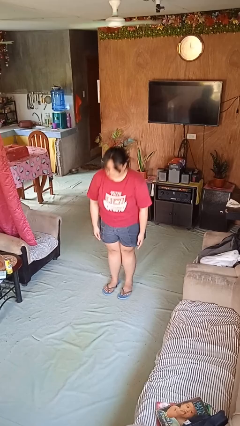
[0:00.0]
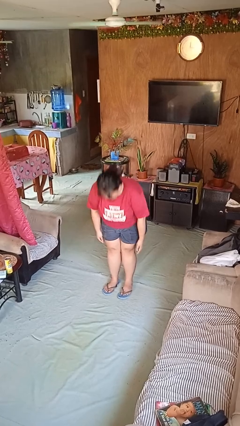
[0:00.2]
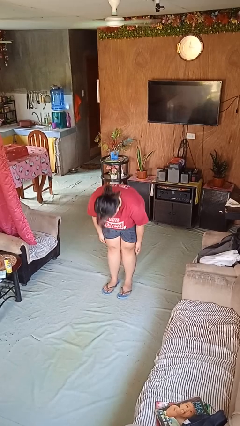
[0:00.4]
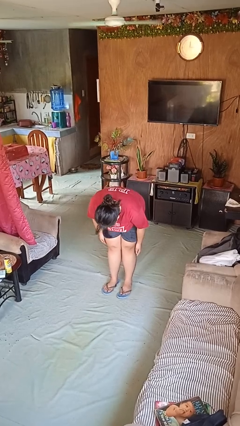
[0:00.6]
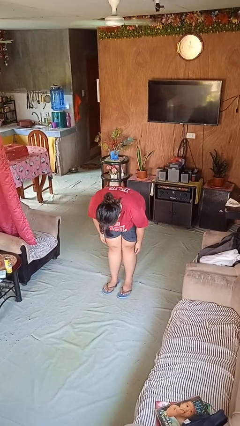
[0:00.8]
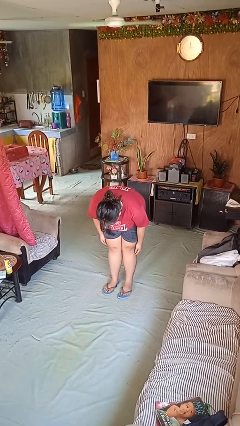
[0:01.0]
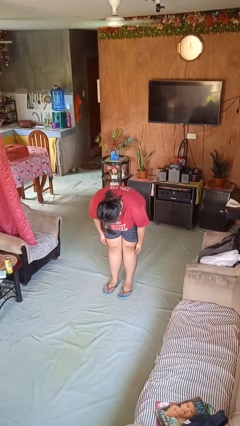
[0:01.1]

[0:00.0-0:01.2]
person bows

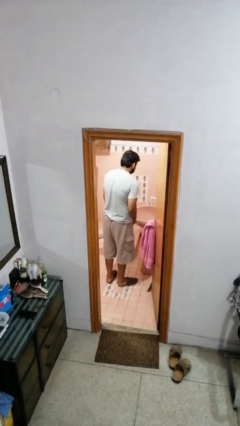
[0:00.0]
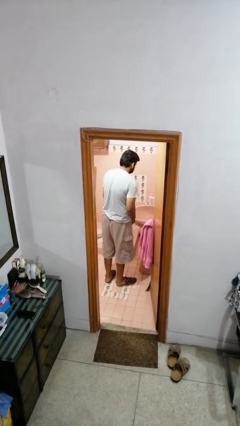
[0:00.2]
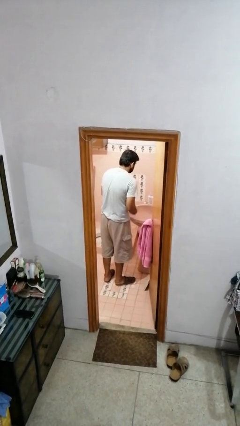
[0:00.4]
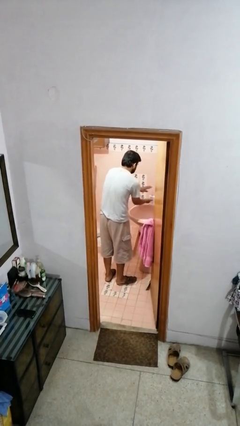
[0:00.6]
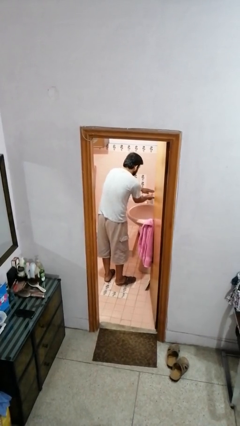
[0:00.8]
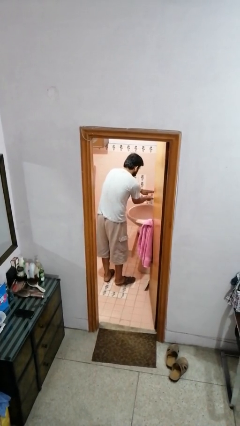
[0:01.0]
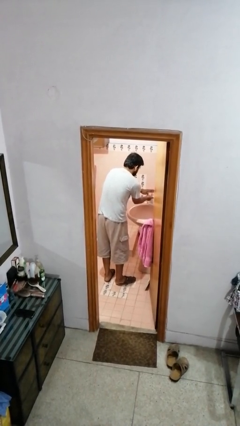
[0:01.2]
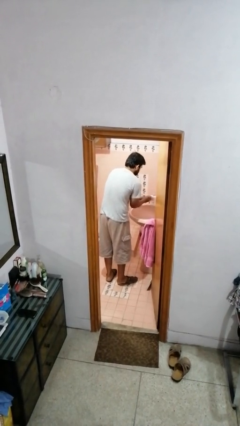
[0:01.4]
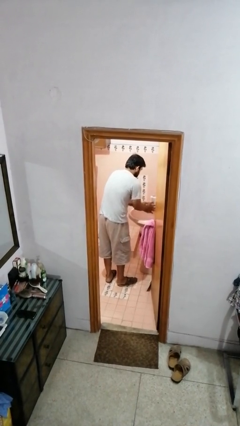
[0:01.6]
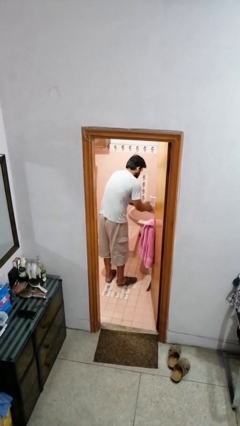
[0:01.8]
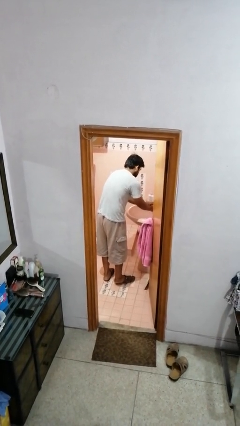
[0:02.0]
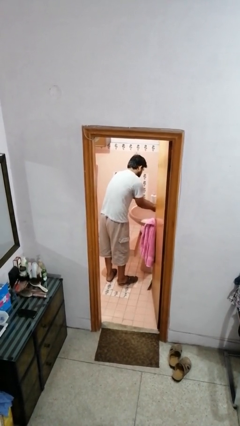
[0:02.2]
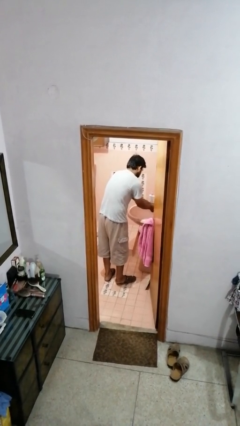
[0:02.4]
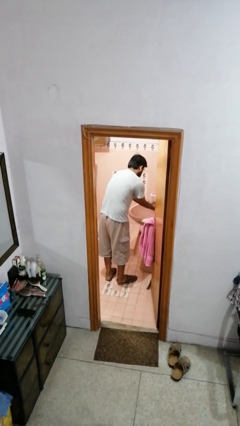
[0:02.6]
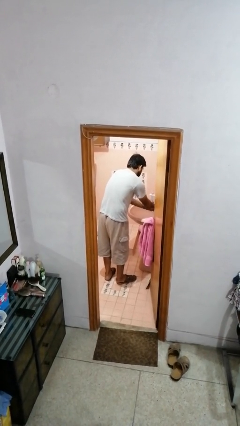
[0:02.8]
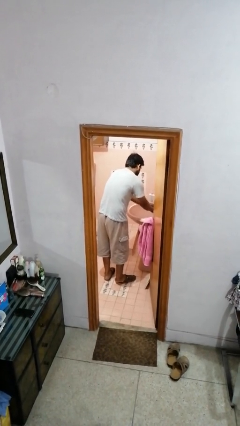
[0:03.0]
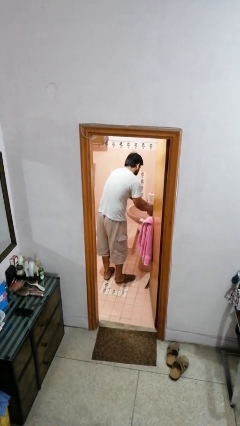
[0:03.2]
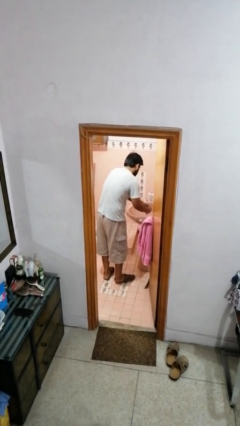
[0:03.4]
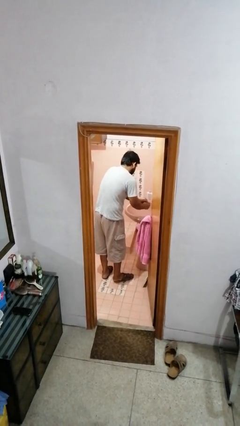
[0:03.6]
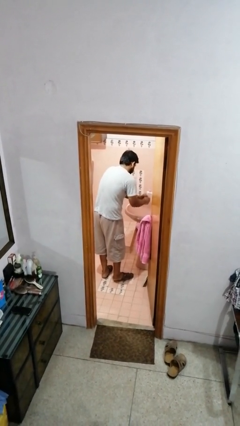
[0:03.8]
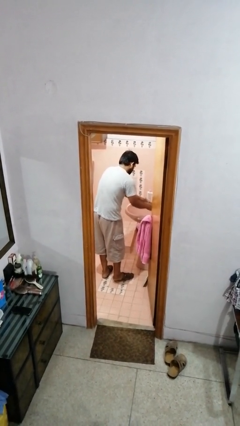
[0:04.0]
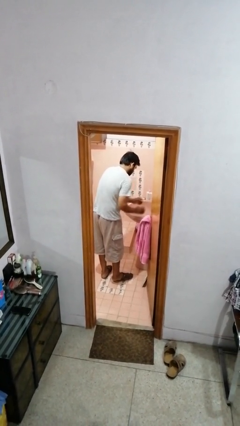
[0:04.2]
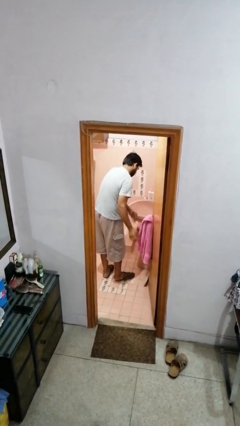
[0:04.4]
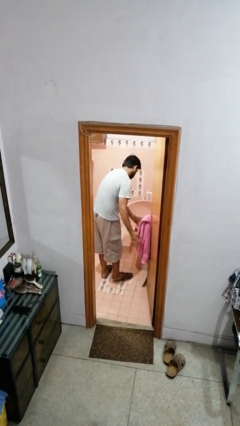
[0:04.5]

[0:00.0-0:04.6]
person washes hands

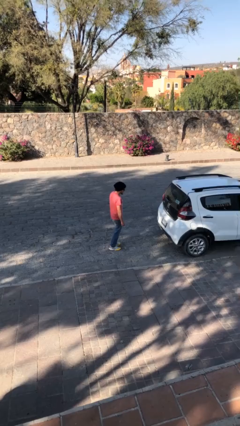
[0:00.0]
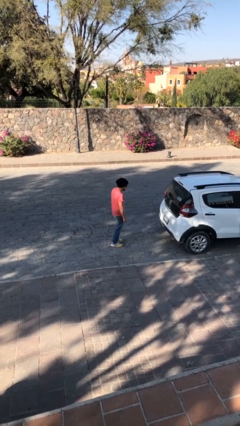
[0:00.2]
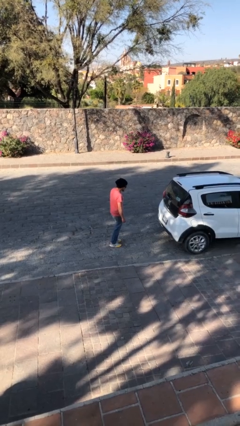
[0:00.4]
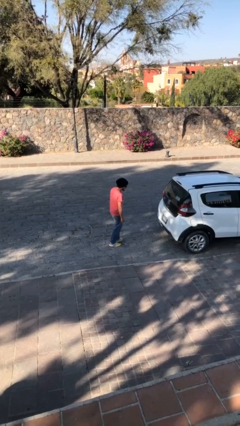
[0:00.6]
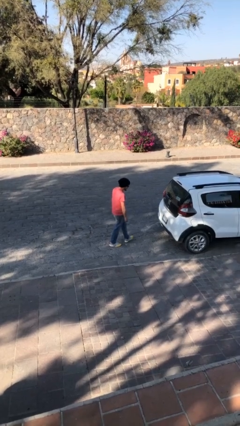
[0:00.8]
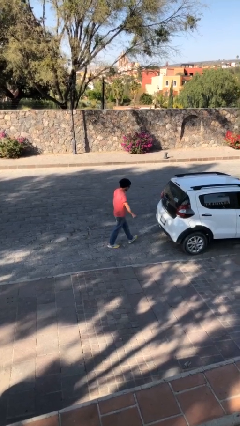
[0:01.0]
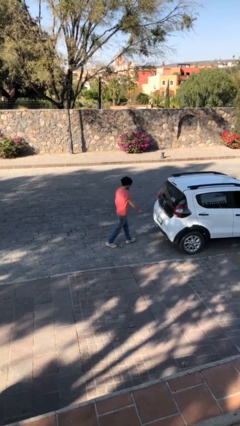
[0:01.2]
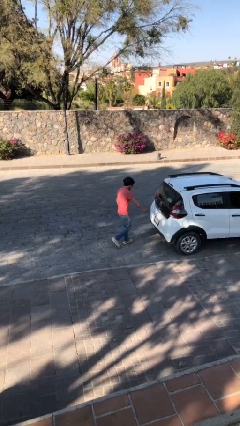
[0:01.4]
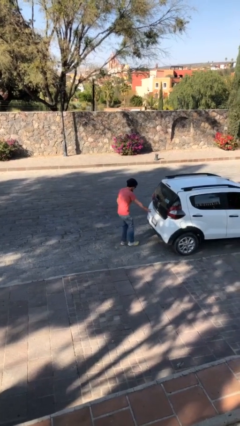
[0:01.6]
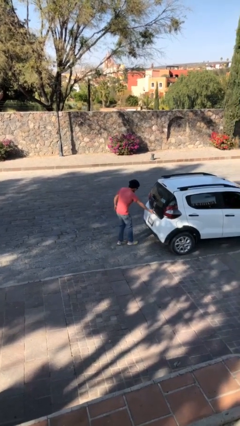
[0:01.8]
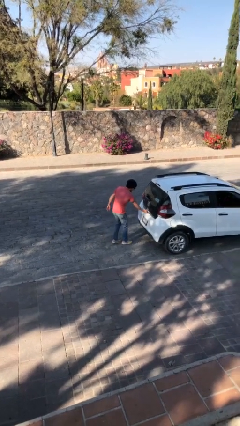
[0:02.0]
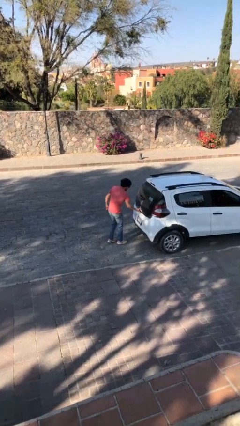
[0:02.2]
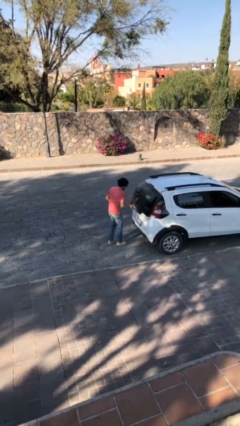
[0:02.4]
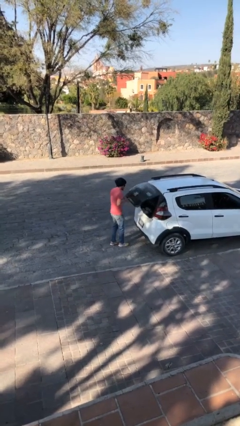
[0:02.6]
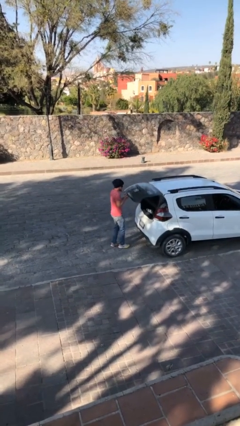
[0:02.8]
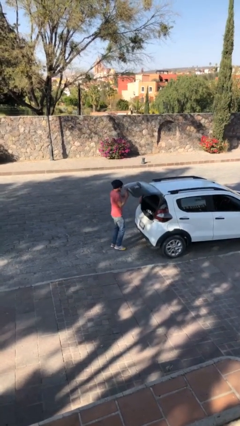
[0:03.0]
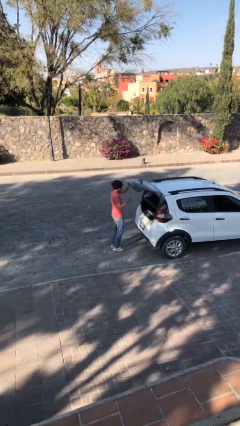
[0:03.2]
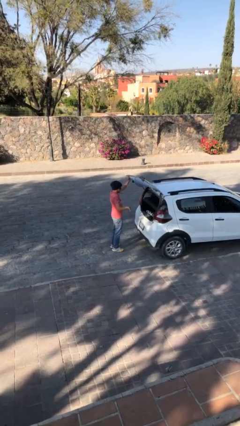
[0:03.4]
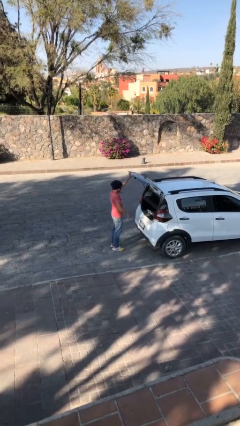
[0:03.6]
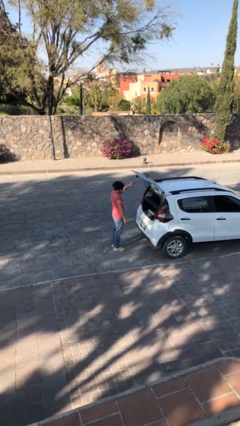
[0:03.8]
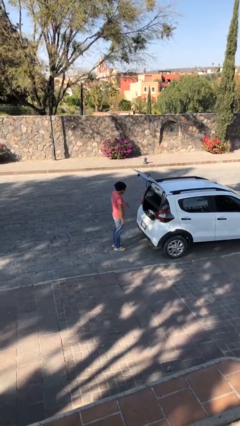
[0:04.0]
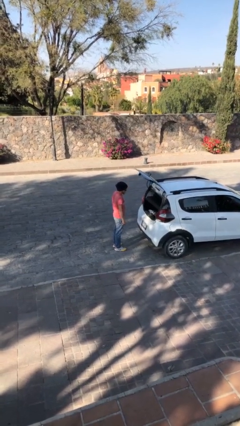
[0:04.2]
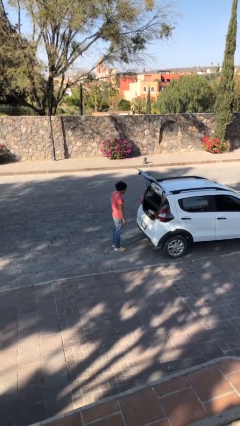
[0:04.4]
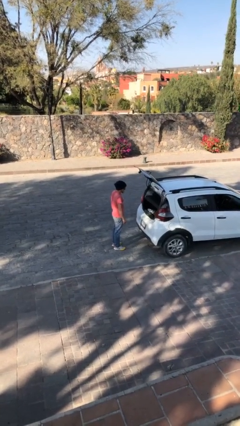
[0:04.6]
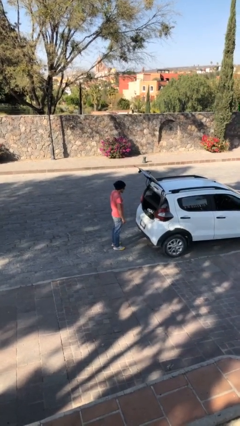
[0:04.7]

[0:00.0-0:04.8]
person opens car trunk

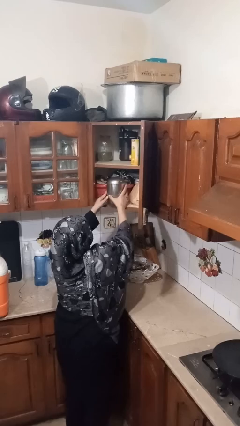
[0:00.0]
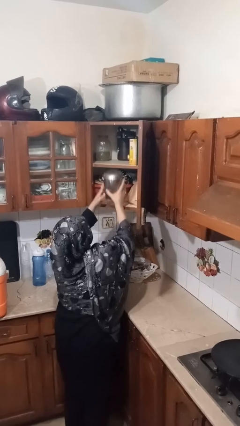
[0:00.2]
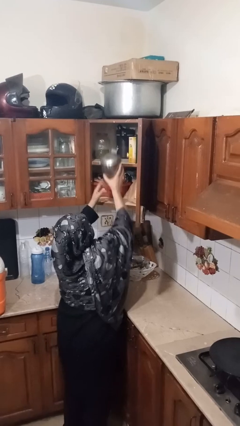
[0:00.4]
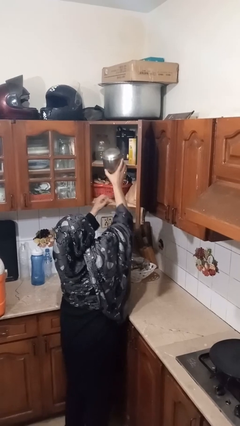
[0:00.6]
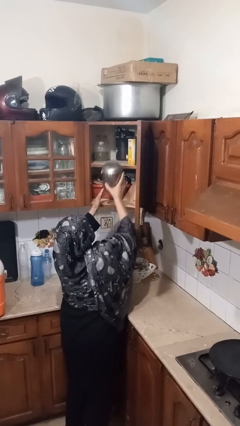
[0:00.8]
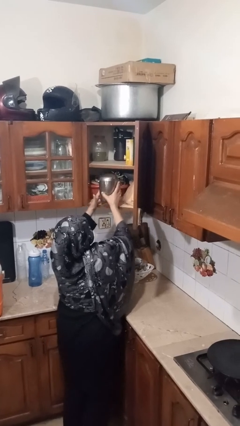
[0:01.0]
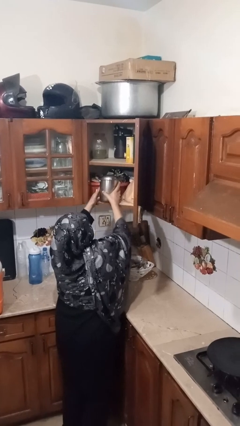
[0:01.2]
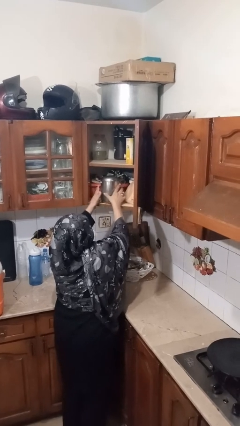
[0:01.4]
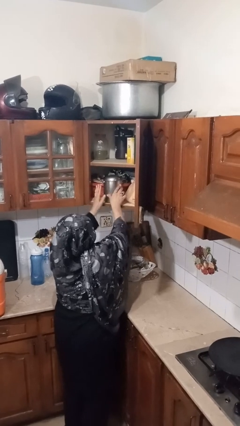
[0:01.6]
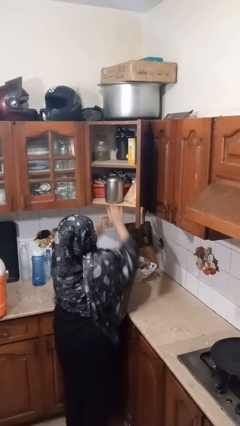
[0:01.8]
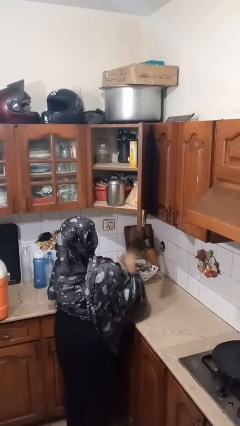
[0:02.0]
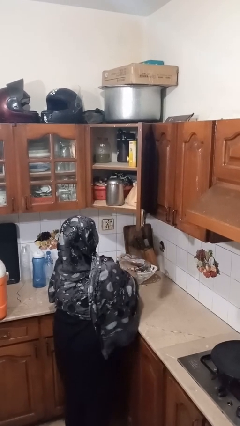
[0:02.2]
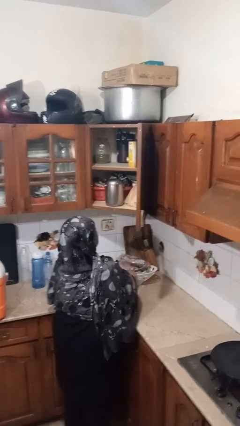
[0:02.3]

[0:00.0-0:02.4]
person loads groceries into cabinet

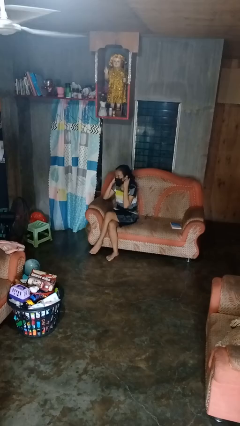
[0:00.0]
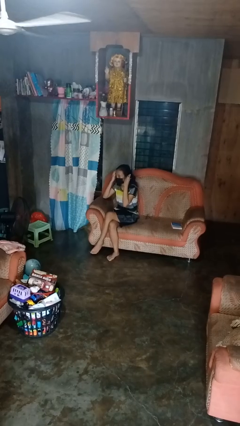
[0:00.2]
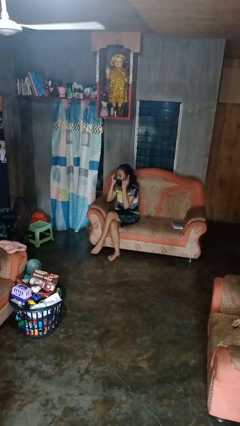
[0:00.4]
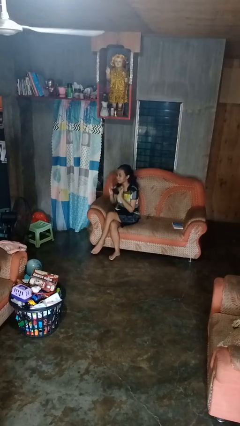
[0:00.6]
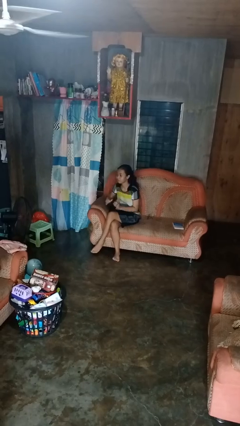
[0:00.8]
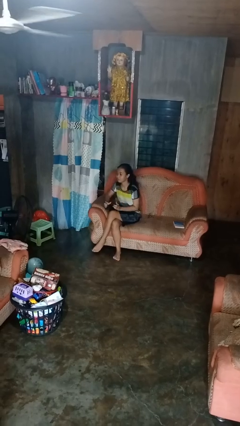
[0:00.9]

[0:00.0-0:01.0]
person takes off facemask

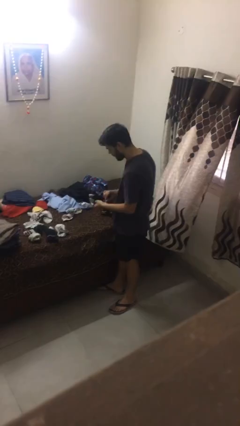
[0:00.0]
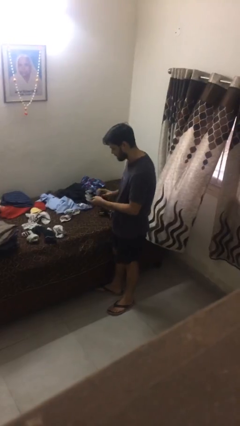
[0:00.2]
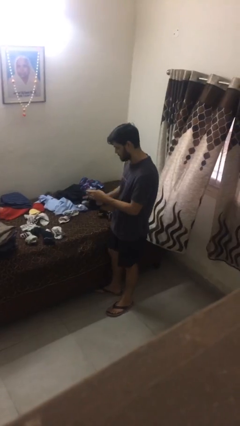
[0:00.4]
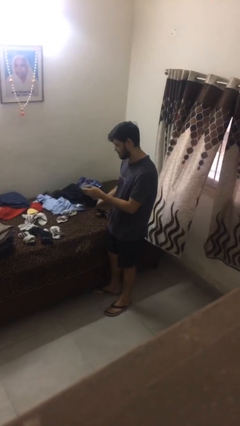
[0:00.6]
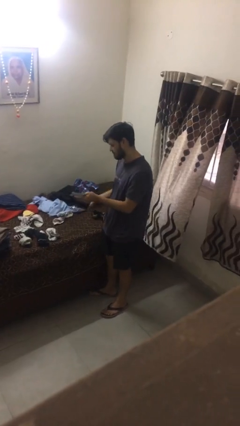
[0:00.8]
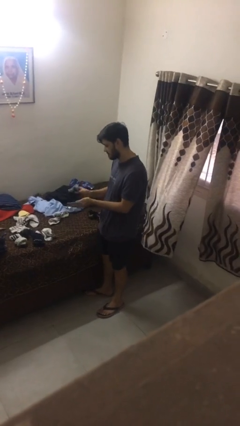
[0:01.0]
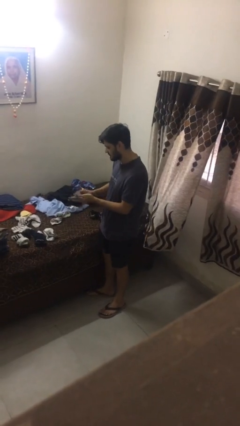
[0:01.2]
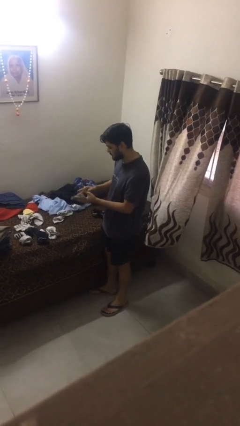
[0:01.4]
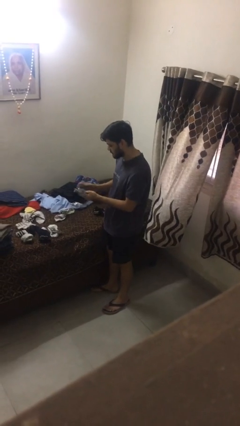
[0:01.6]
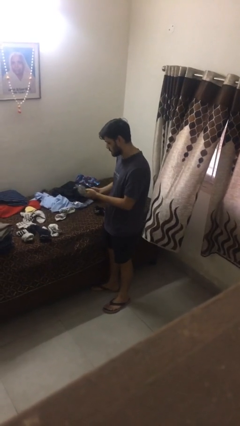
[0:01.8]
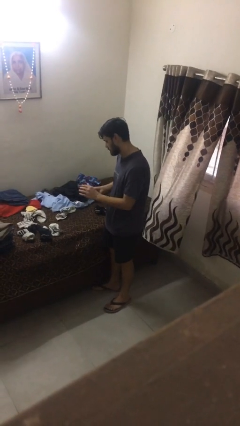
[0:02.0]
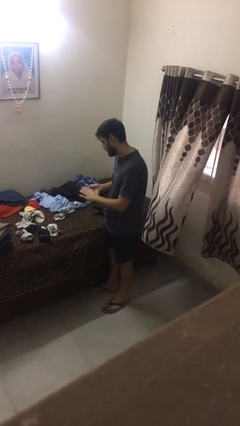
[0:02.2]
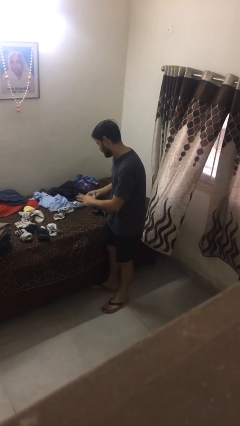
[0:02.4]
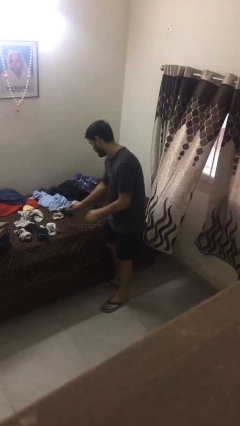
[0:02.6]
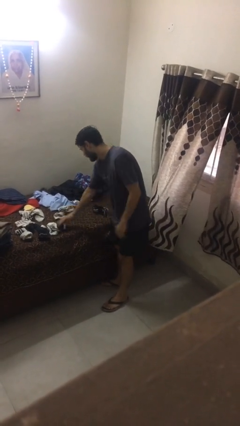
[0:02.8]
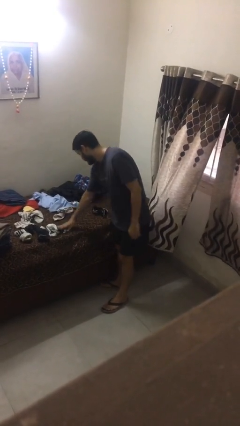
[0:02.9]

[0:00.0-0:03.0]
person folds socks

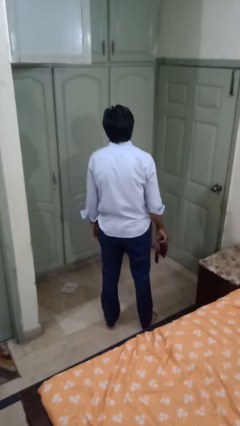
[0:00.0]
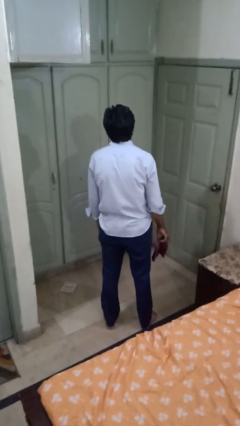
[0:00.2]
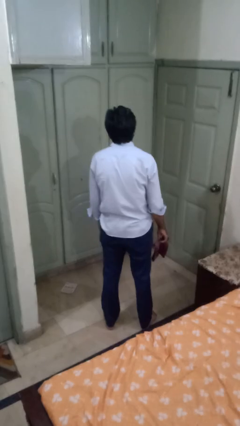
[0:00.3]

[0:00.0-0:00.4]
person blows nose
